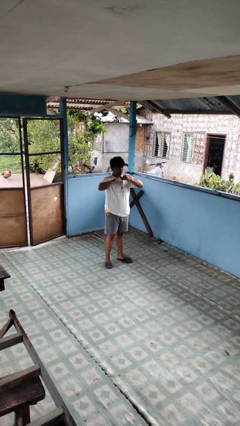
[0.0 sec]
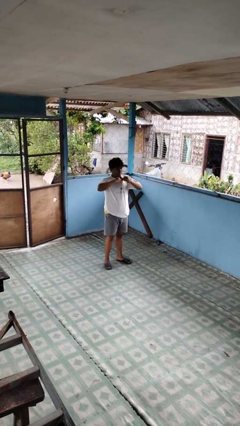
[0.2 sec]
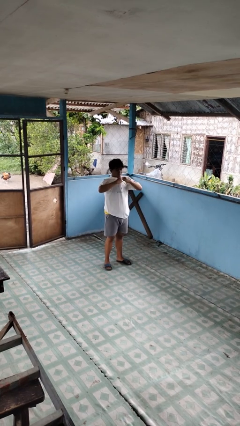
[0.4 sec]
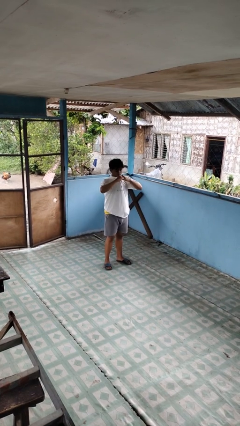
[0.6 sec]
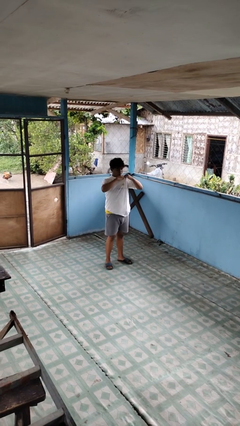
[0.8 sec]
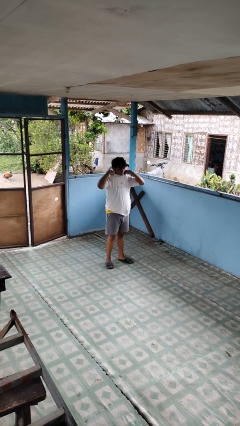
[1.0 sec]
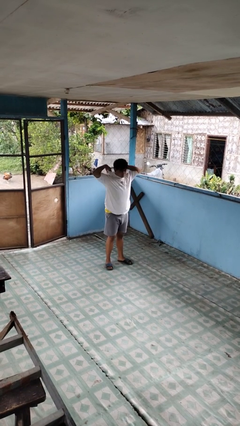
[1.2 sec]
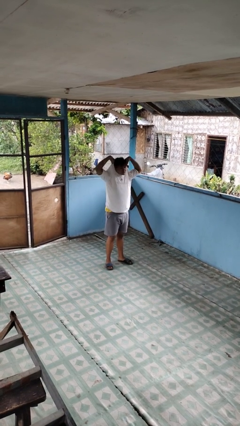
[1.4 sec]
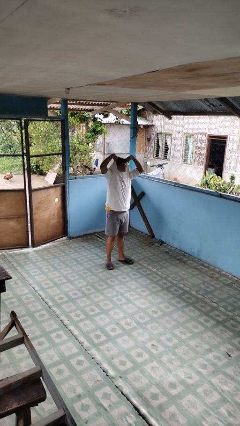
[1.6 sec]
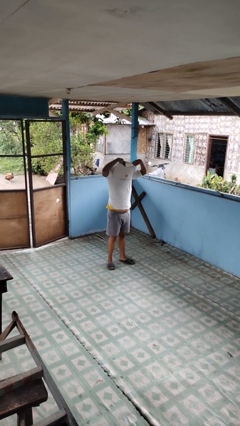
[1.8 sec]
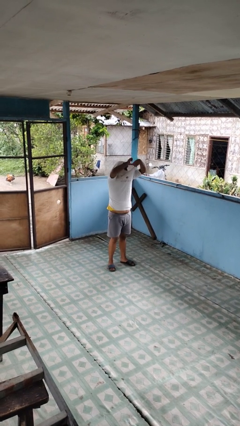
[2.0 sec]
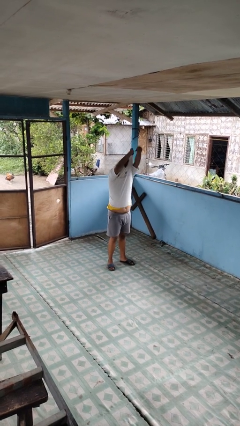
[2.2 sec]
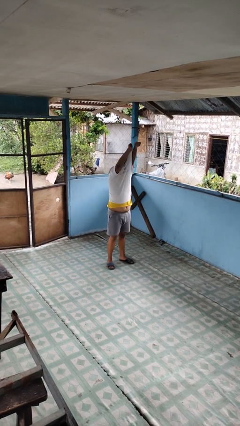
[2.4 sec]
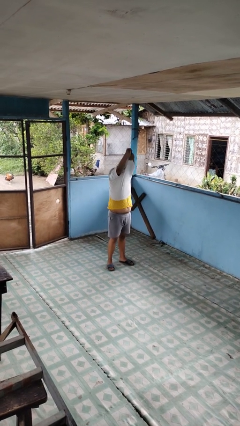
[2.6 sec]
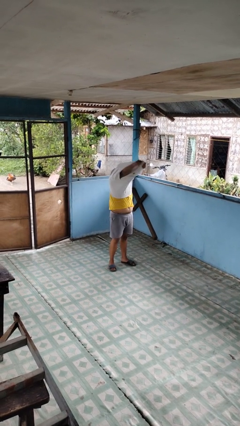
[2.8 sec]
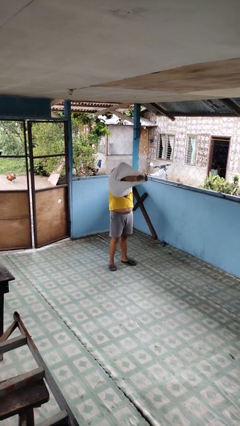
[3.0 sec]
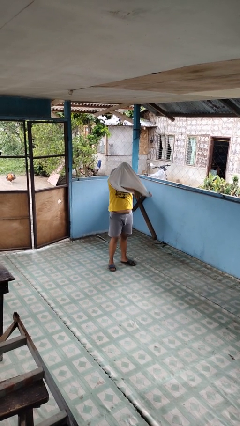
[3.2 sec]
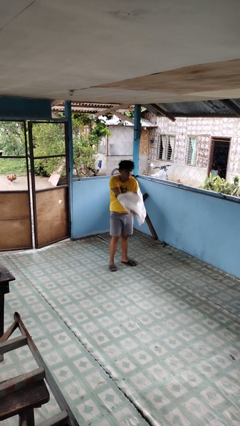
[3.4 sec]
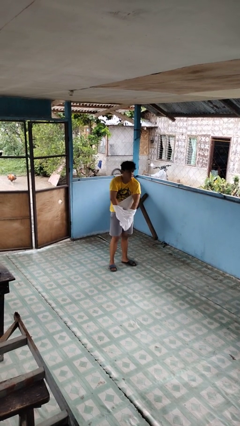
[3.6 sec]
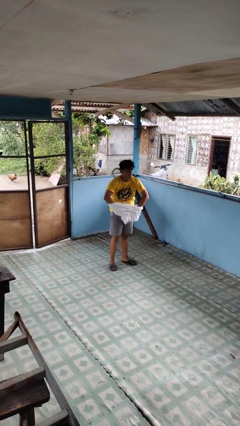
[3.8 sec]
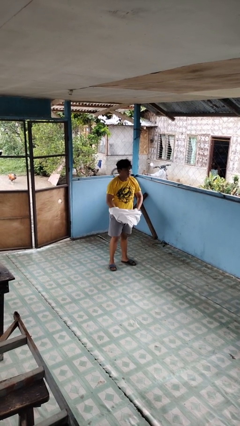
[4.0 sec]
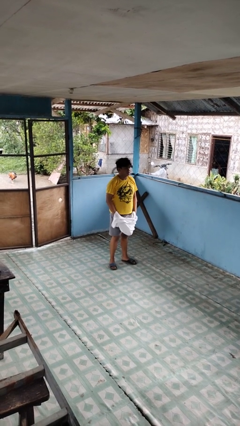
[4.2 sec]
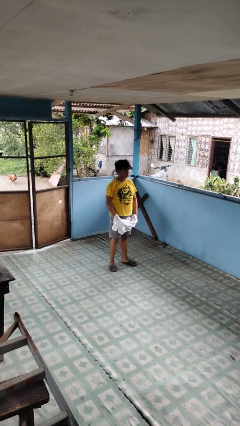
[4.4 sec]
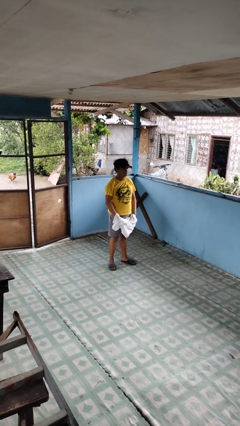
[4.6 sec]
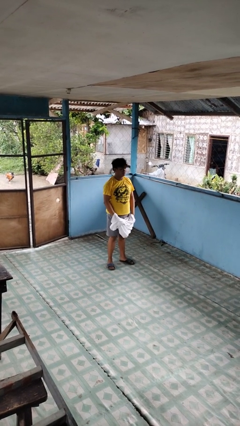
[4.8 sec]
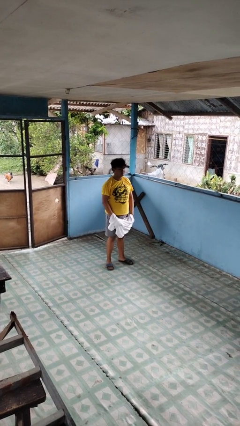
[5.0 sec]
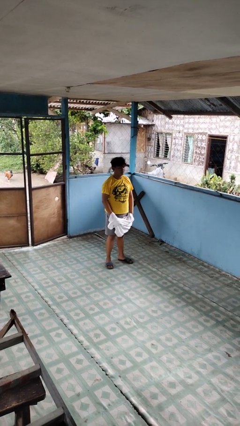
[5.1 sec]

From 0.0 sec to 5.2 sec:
person takes off shirt

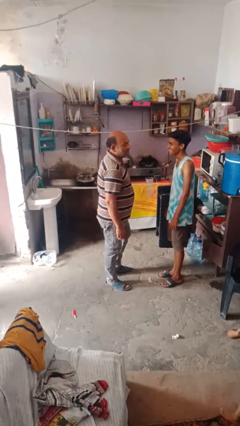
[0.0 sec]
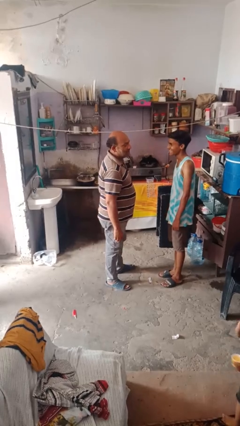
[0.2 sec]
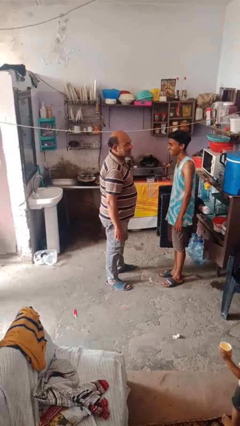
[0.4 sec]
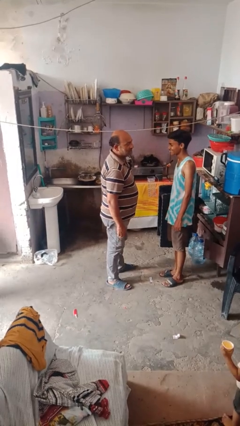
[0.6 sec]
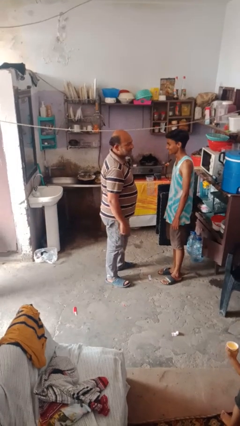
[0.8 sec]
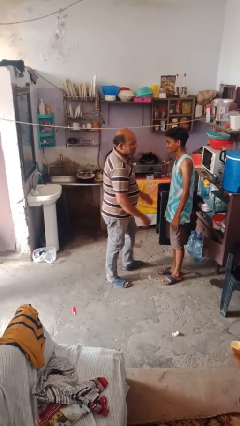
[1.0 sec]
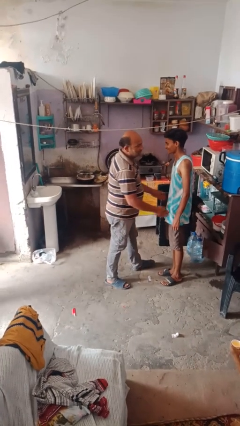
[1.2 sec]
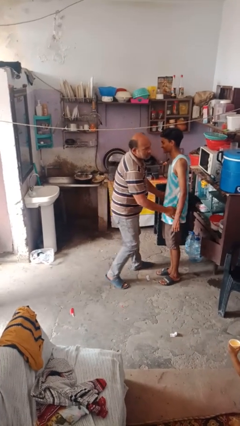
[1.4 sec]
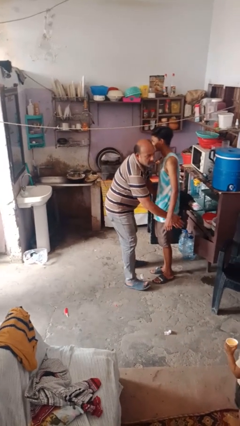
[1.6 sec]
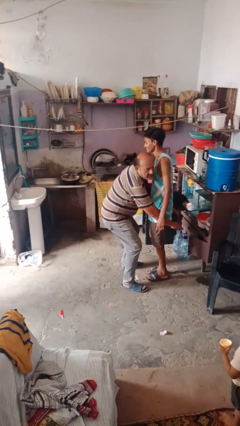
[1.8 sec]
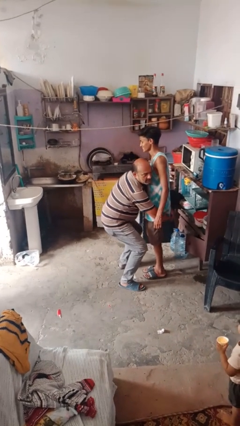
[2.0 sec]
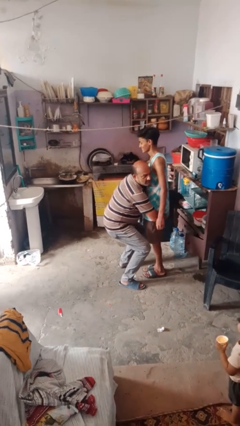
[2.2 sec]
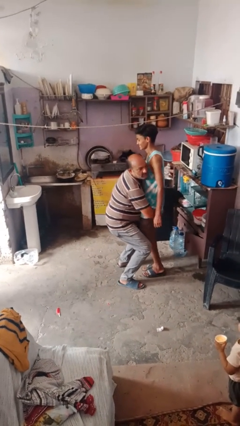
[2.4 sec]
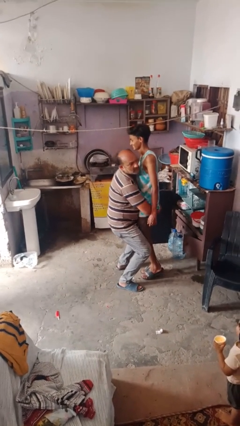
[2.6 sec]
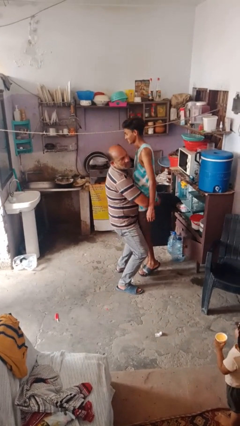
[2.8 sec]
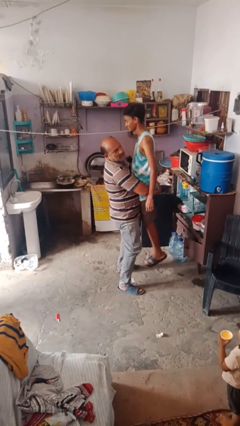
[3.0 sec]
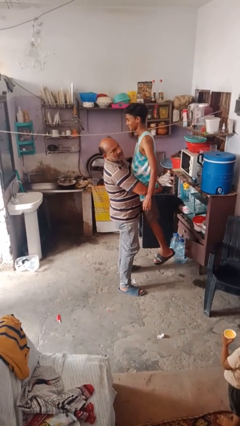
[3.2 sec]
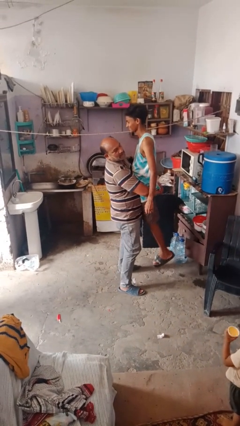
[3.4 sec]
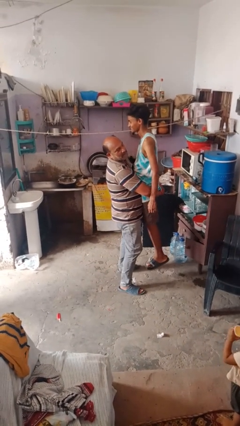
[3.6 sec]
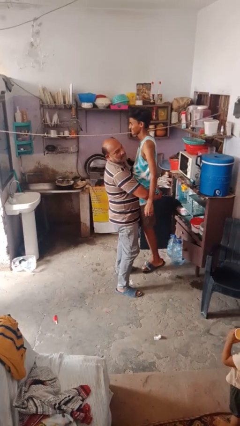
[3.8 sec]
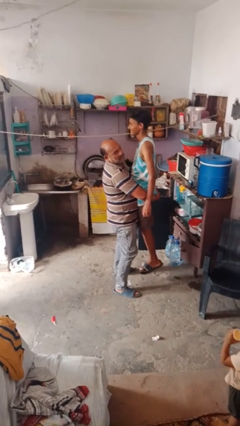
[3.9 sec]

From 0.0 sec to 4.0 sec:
person picks up person

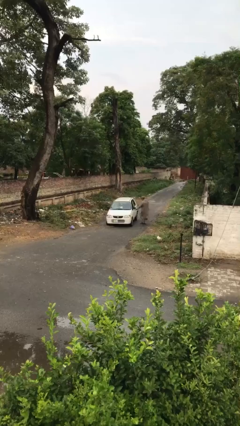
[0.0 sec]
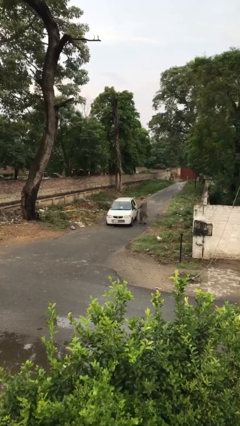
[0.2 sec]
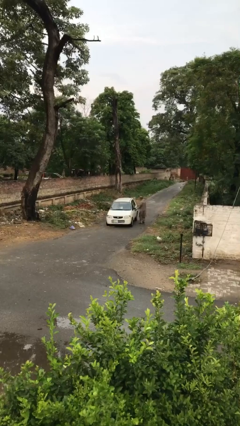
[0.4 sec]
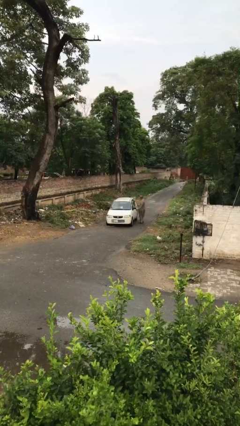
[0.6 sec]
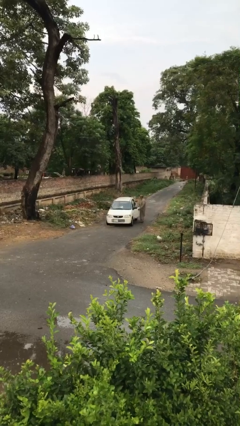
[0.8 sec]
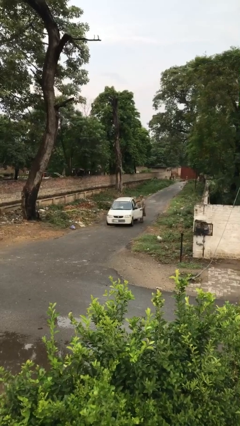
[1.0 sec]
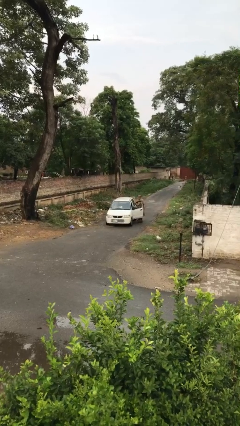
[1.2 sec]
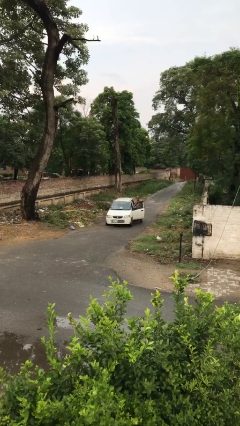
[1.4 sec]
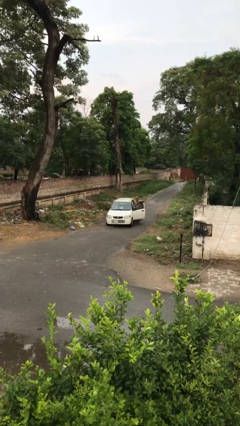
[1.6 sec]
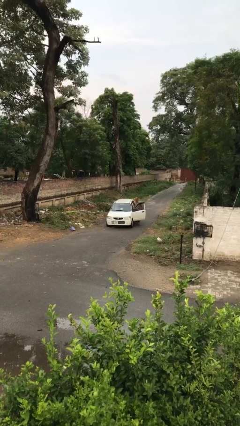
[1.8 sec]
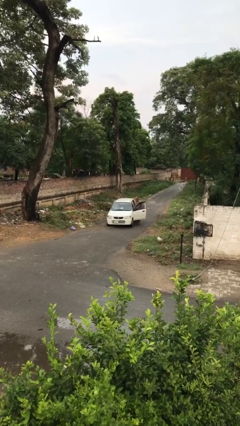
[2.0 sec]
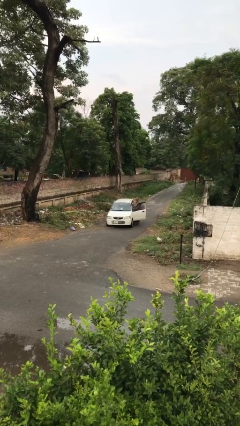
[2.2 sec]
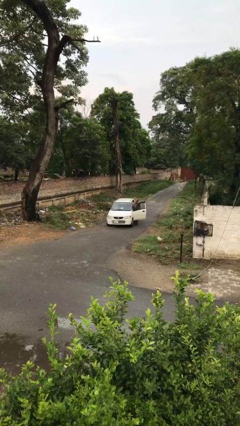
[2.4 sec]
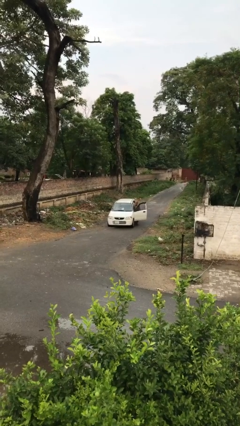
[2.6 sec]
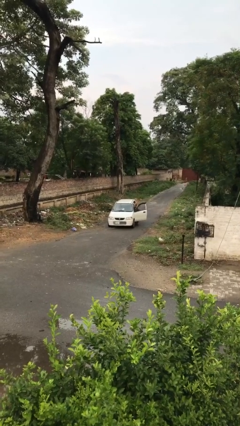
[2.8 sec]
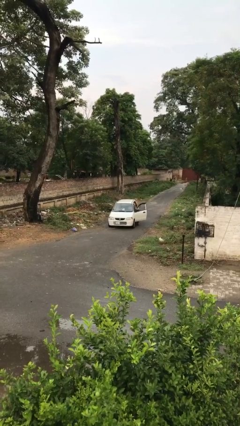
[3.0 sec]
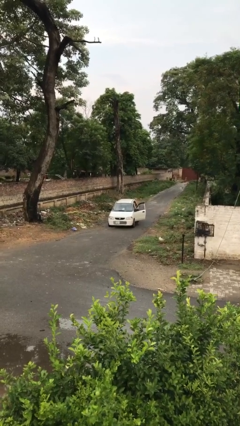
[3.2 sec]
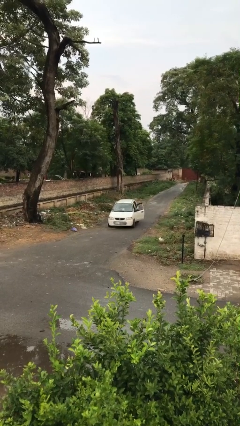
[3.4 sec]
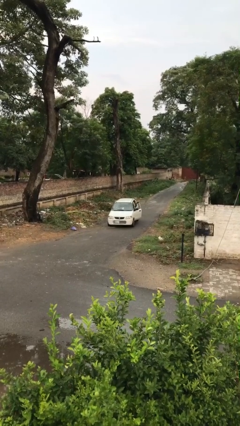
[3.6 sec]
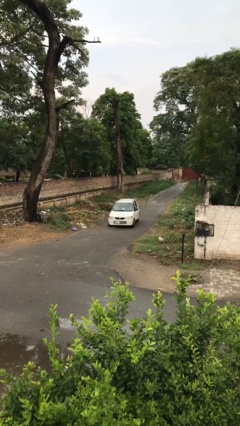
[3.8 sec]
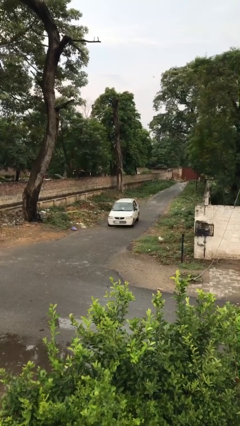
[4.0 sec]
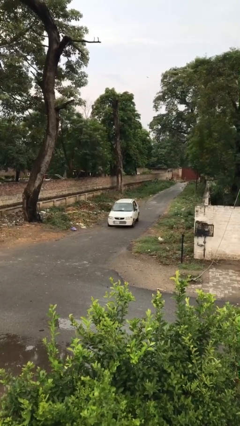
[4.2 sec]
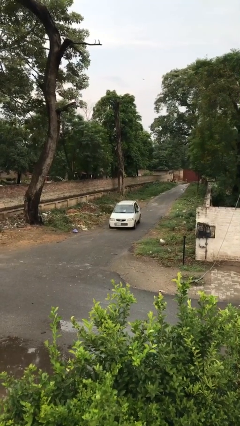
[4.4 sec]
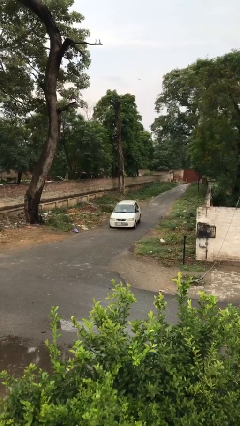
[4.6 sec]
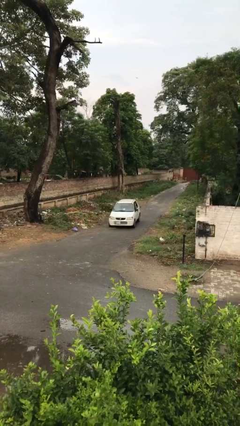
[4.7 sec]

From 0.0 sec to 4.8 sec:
car picks up person

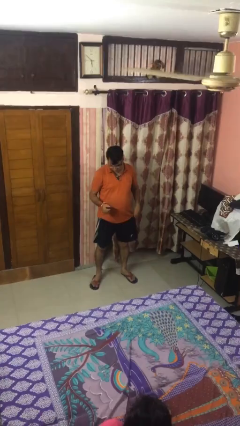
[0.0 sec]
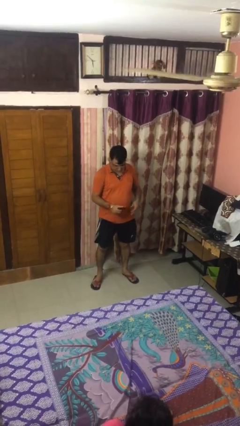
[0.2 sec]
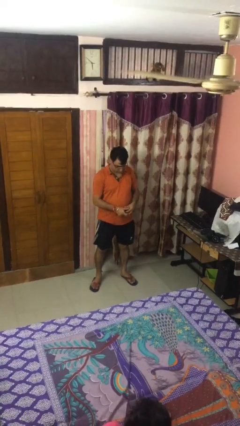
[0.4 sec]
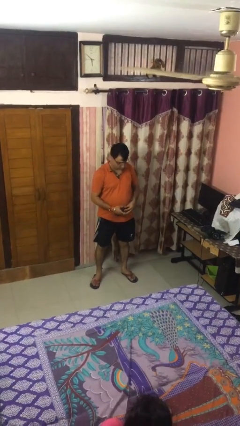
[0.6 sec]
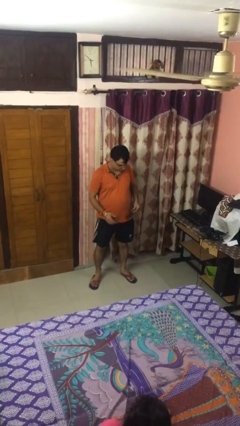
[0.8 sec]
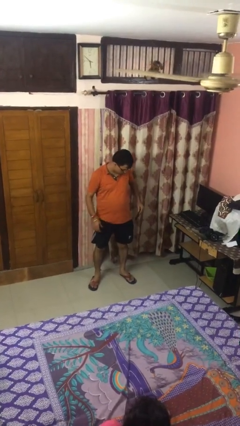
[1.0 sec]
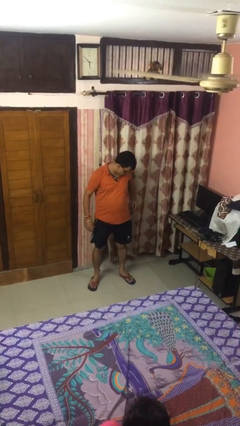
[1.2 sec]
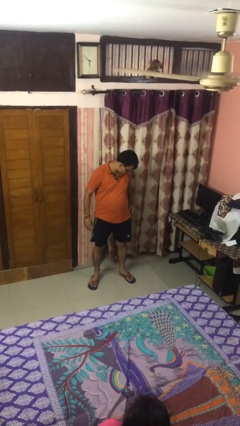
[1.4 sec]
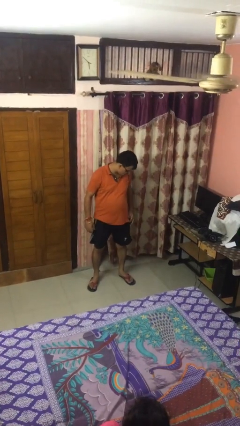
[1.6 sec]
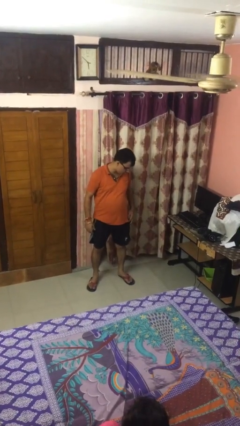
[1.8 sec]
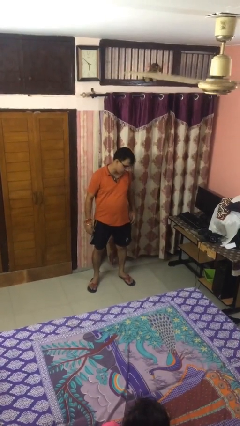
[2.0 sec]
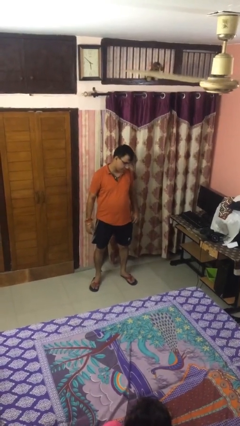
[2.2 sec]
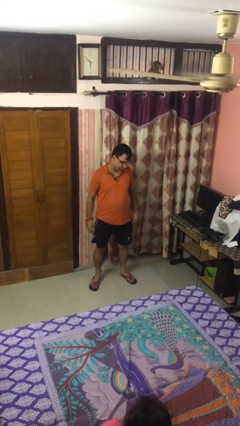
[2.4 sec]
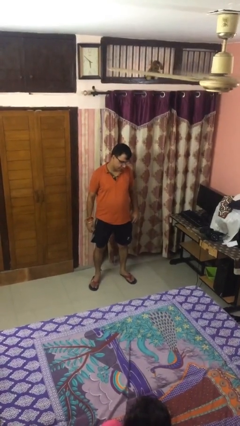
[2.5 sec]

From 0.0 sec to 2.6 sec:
person puts phone into pocket

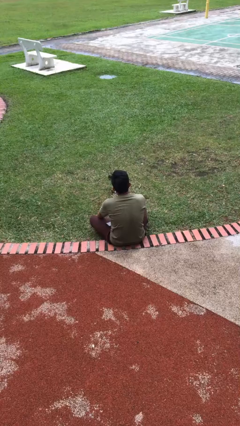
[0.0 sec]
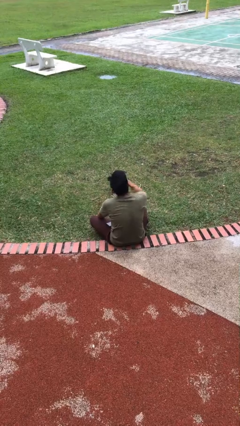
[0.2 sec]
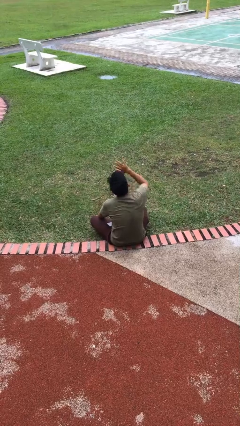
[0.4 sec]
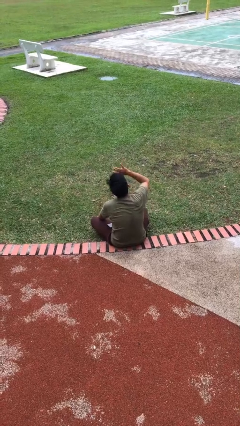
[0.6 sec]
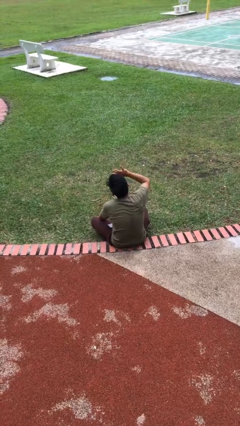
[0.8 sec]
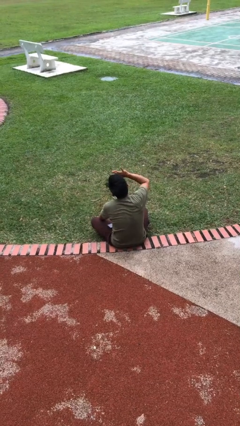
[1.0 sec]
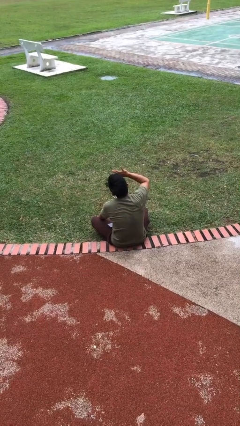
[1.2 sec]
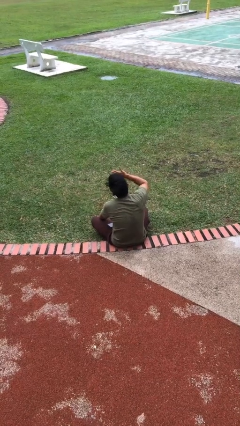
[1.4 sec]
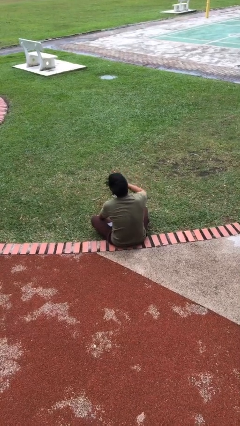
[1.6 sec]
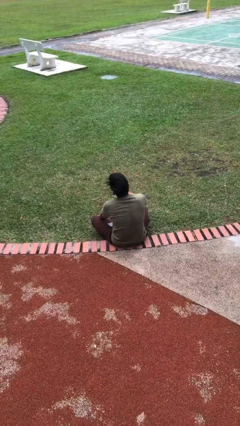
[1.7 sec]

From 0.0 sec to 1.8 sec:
person shades eyes
